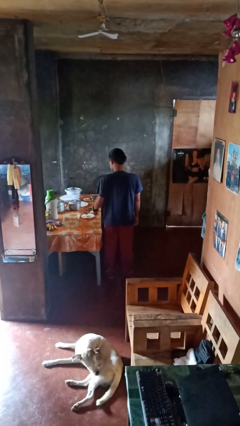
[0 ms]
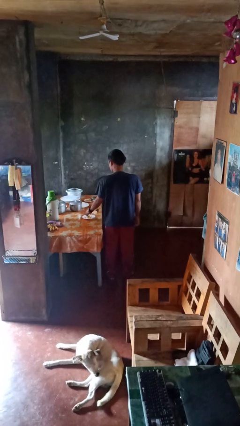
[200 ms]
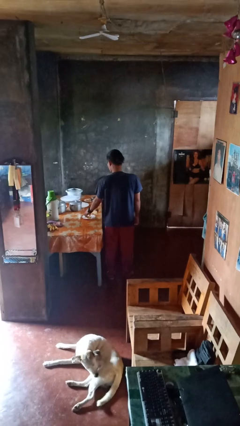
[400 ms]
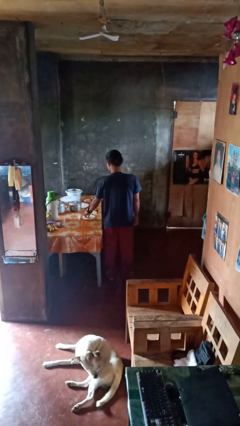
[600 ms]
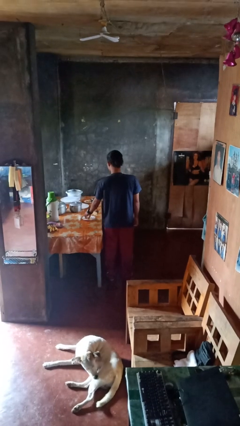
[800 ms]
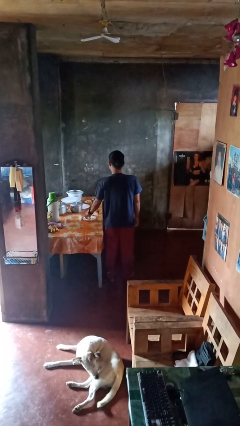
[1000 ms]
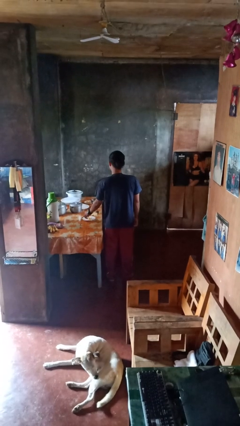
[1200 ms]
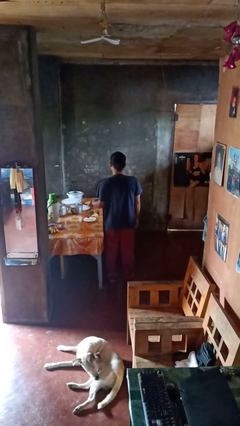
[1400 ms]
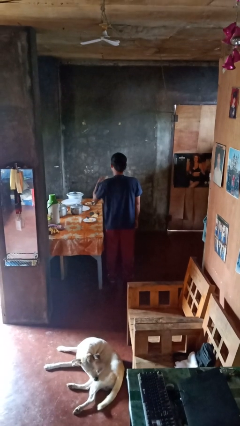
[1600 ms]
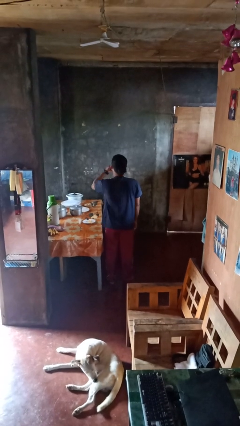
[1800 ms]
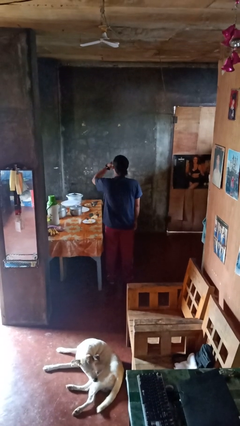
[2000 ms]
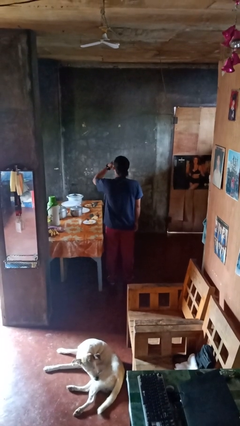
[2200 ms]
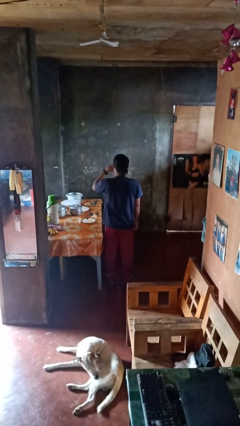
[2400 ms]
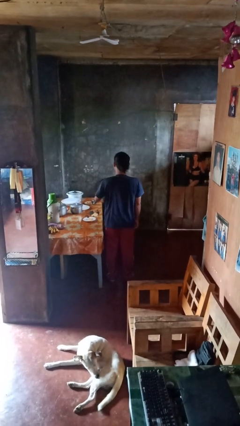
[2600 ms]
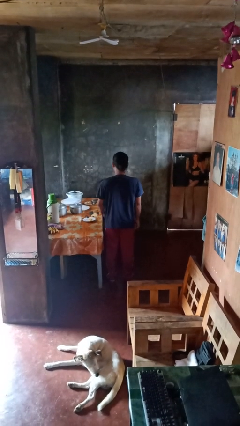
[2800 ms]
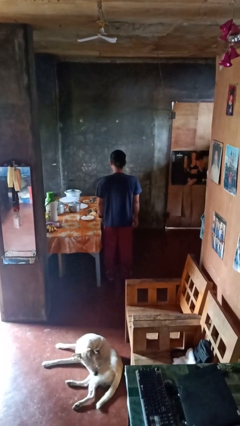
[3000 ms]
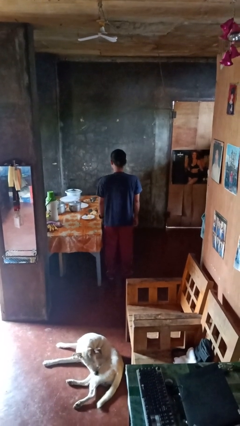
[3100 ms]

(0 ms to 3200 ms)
person eats with hands

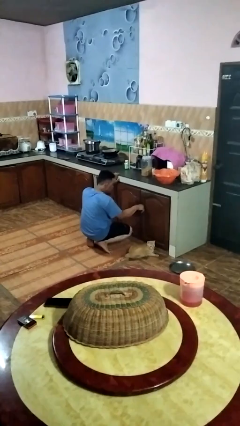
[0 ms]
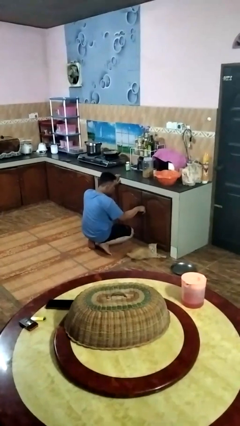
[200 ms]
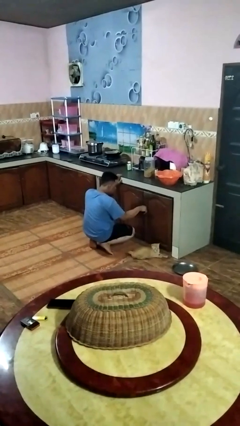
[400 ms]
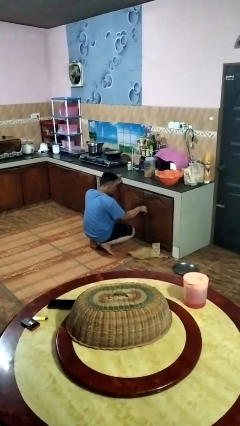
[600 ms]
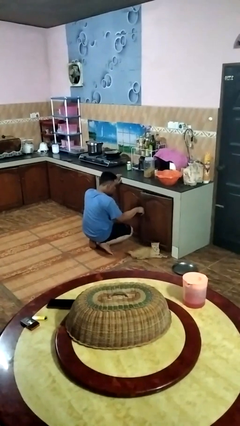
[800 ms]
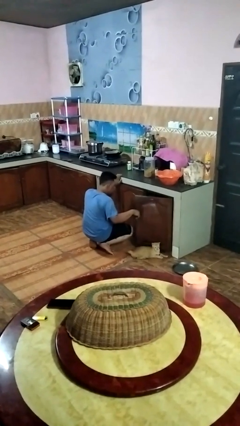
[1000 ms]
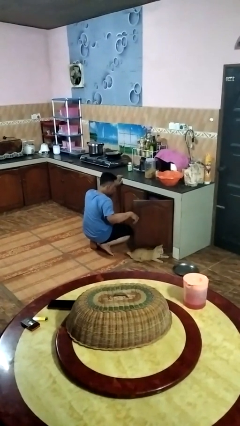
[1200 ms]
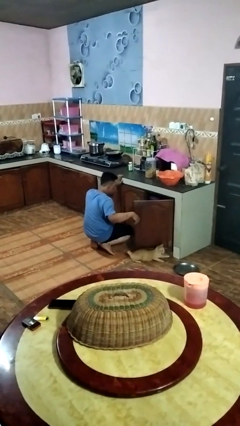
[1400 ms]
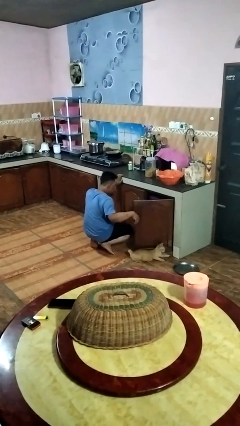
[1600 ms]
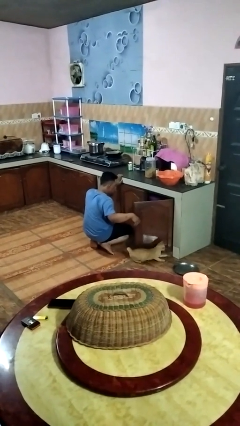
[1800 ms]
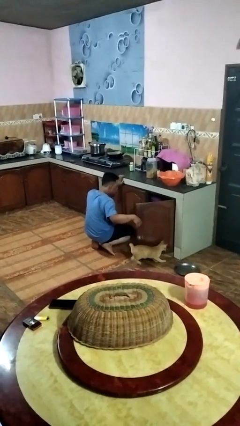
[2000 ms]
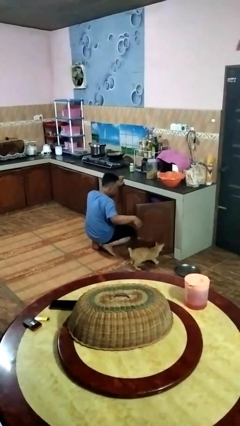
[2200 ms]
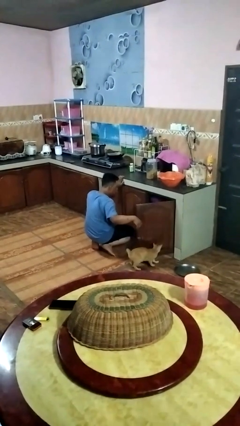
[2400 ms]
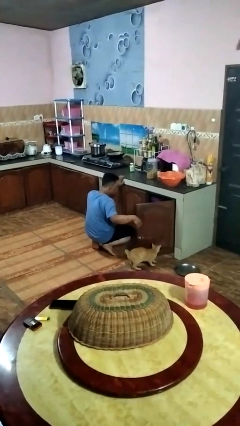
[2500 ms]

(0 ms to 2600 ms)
person opens kitchen drawer

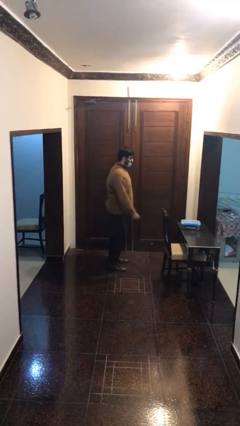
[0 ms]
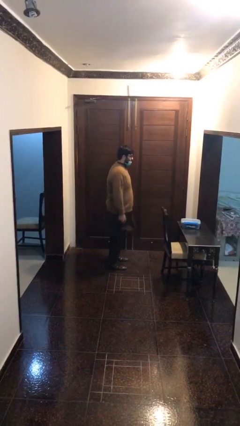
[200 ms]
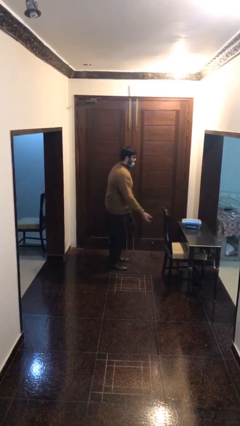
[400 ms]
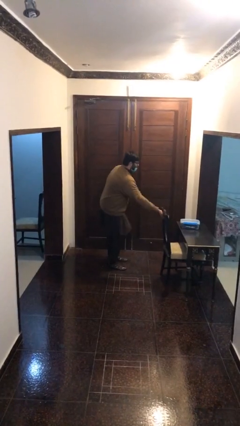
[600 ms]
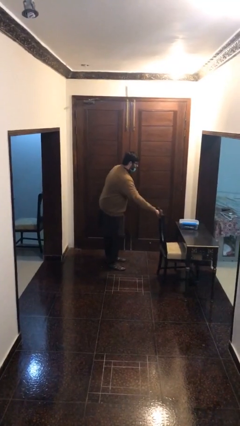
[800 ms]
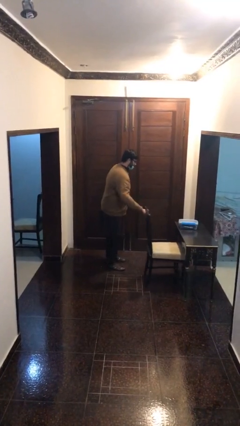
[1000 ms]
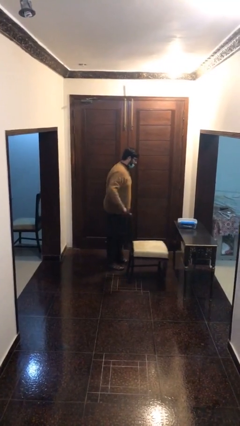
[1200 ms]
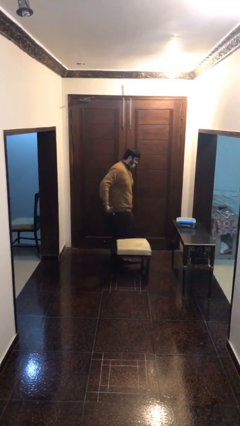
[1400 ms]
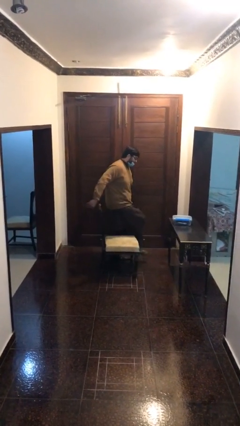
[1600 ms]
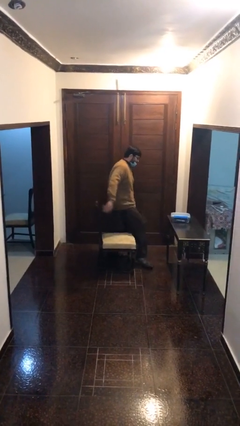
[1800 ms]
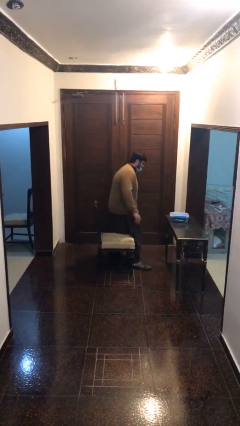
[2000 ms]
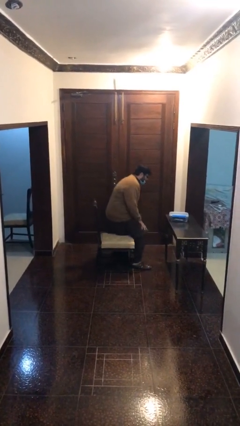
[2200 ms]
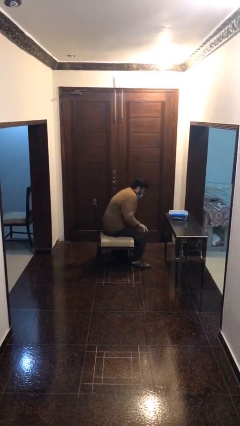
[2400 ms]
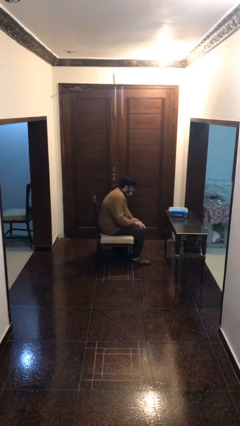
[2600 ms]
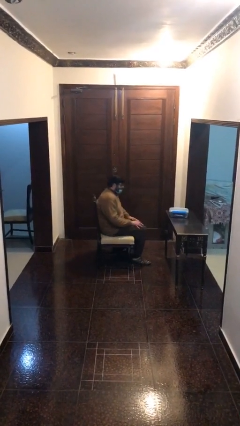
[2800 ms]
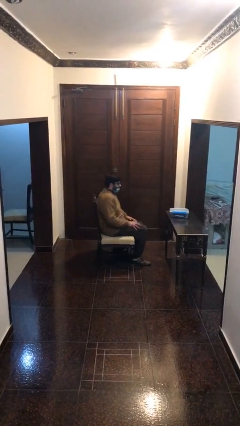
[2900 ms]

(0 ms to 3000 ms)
person sits down

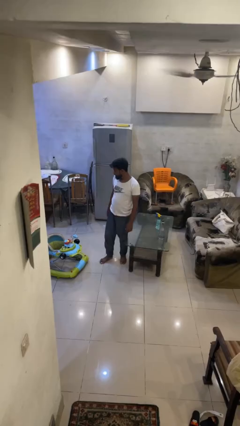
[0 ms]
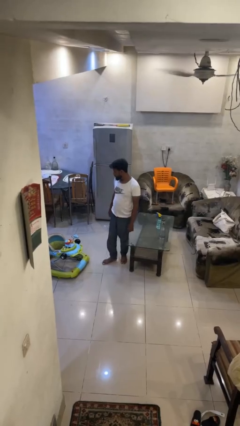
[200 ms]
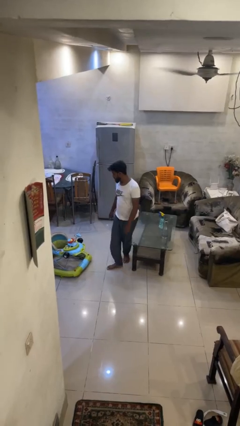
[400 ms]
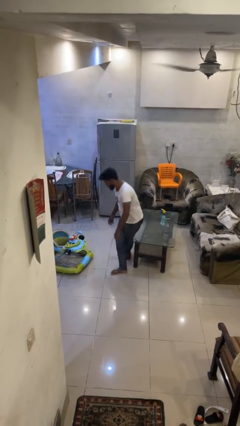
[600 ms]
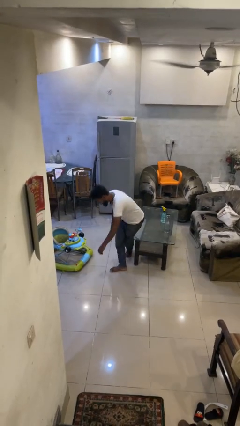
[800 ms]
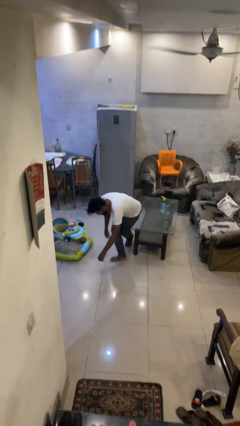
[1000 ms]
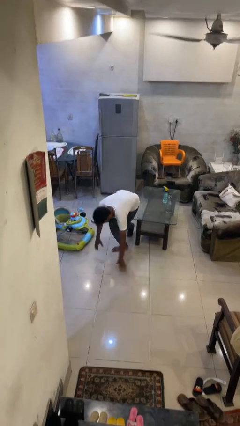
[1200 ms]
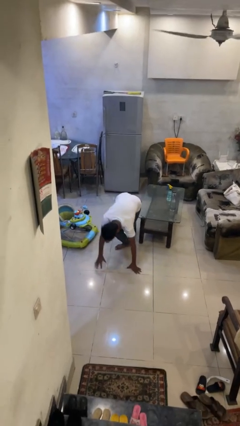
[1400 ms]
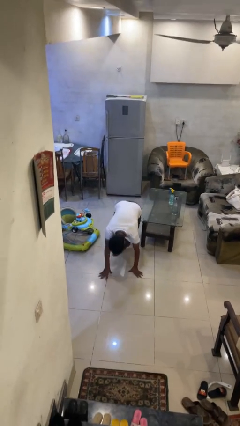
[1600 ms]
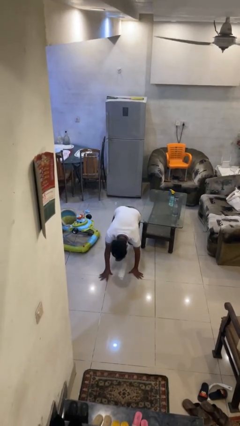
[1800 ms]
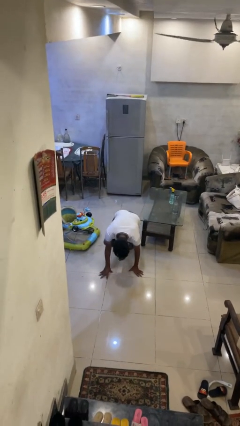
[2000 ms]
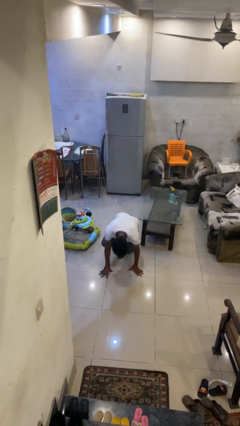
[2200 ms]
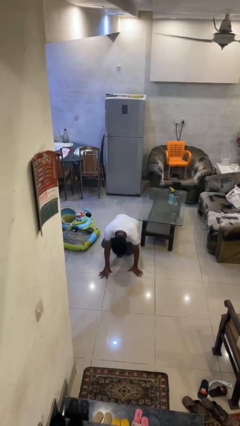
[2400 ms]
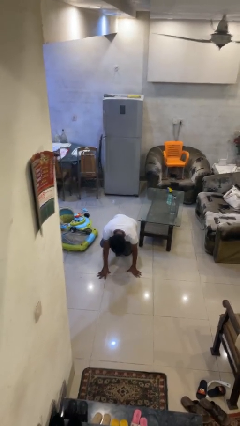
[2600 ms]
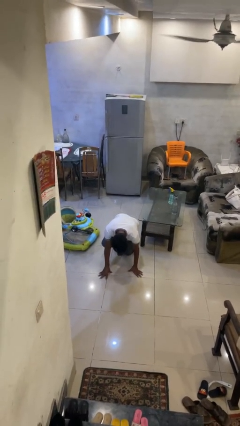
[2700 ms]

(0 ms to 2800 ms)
person trips on object on floor

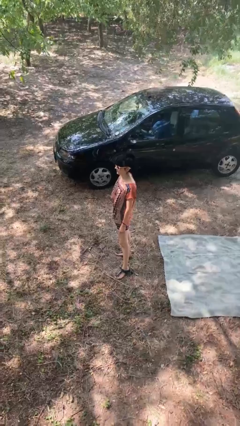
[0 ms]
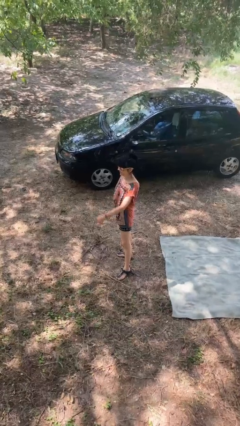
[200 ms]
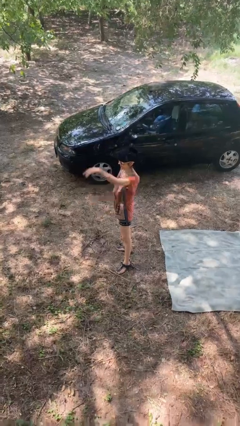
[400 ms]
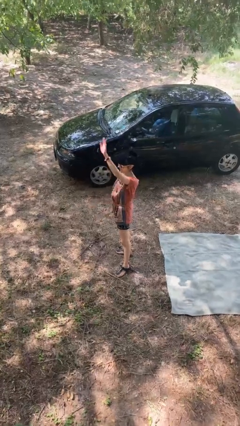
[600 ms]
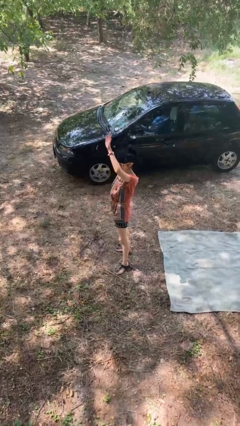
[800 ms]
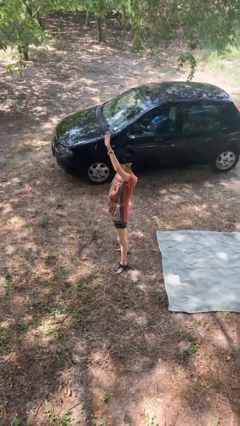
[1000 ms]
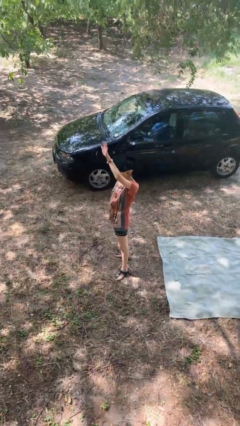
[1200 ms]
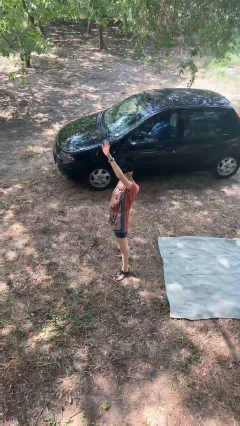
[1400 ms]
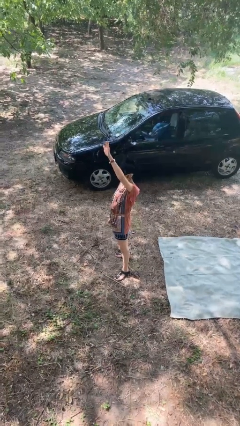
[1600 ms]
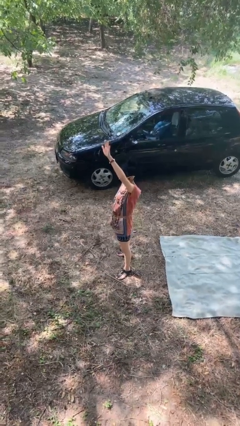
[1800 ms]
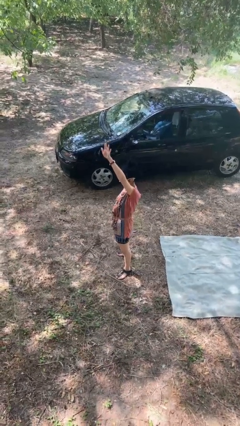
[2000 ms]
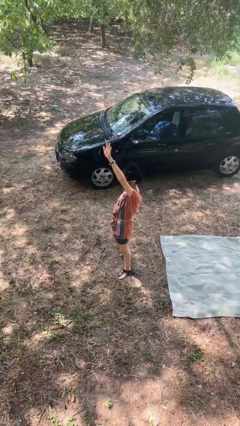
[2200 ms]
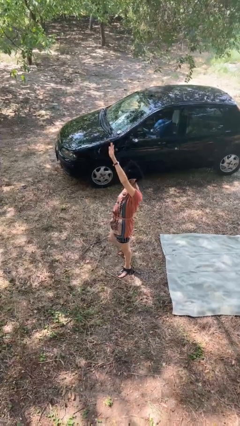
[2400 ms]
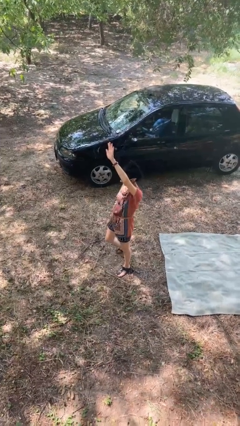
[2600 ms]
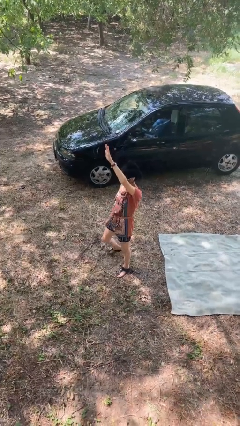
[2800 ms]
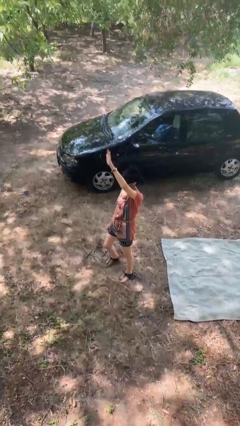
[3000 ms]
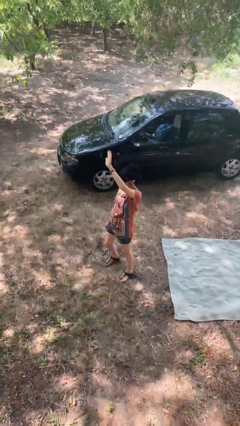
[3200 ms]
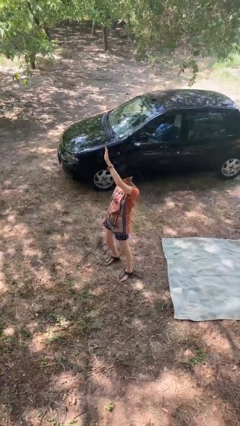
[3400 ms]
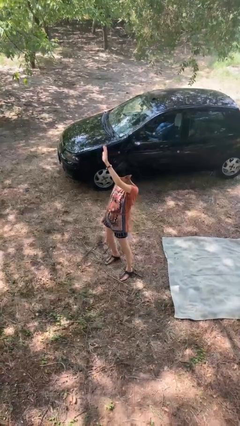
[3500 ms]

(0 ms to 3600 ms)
person waves at person

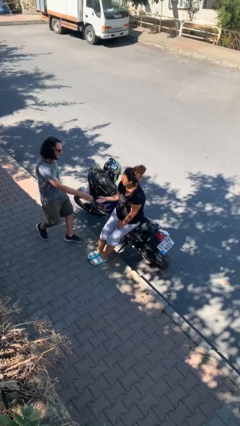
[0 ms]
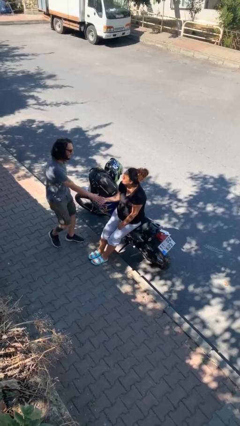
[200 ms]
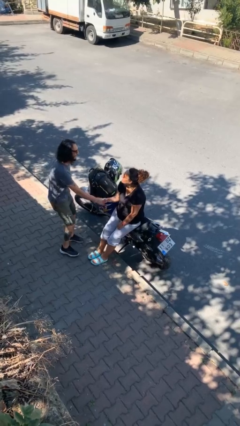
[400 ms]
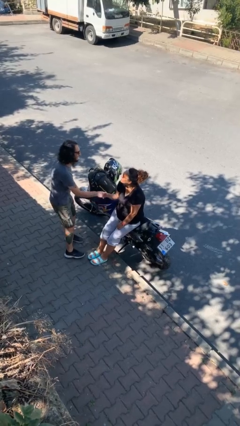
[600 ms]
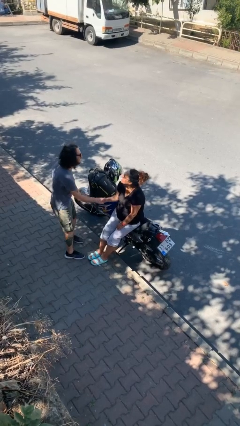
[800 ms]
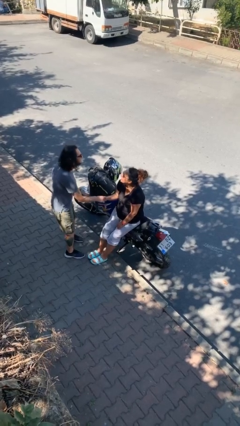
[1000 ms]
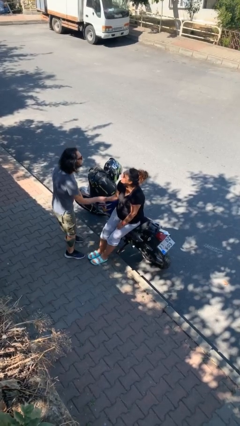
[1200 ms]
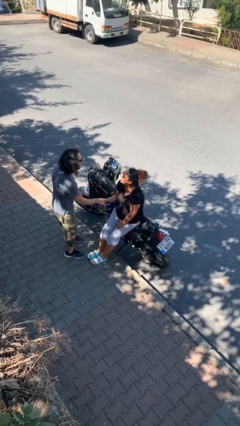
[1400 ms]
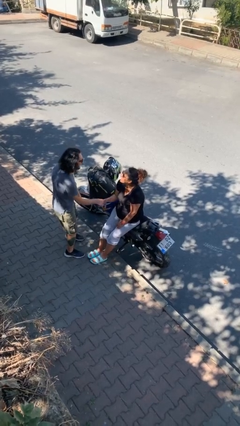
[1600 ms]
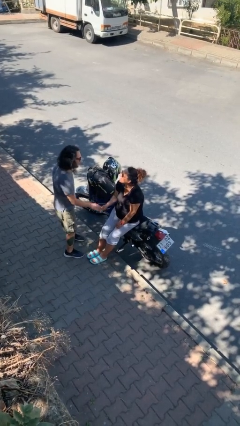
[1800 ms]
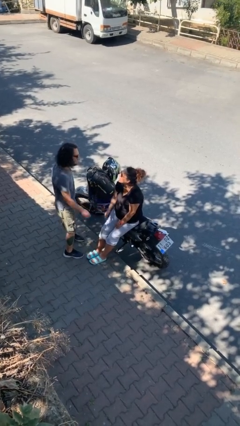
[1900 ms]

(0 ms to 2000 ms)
person shakes hand

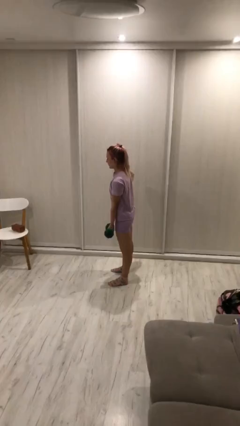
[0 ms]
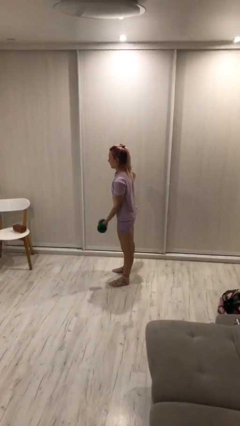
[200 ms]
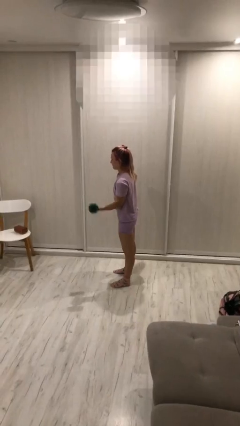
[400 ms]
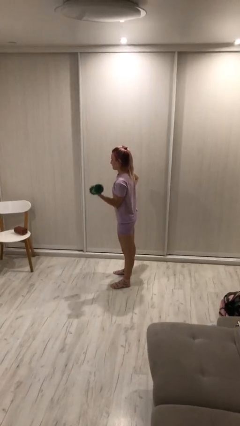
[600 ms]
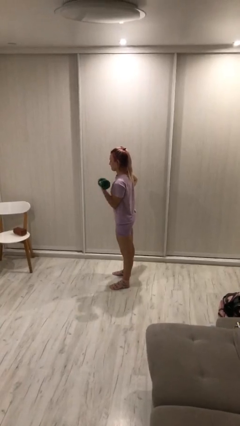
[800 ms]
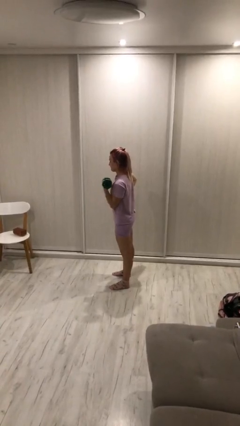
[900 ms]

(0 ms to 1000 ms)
person lifts dumbbells
